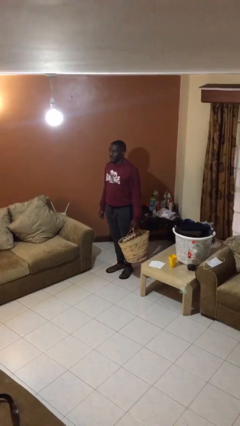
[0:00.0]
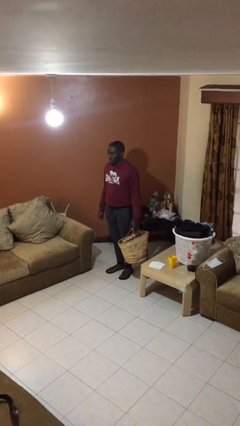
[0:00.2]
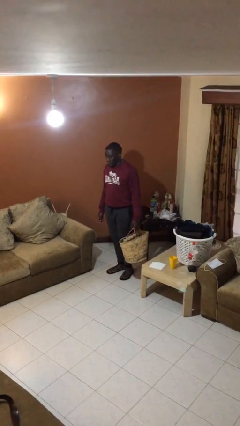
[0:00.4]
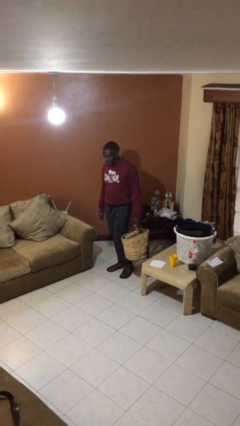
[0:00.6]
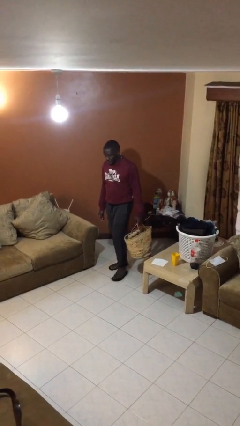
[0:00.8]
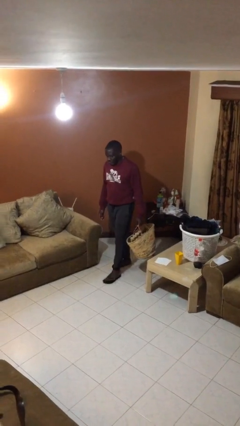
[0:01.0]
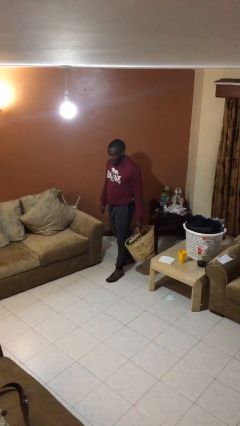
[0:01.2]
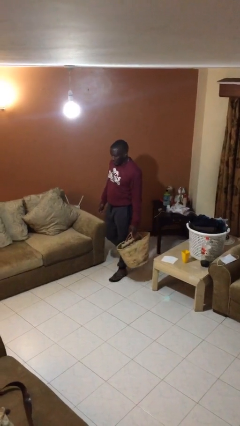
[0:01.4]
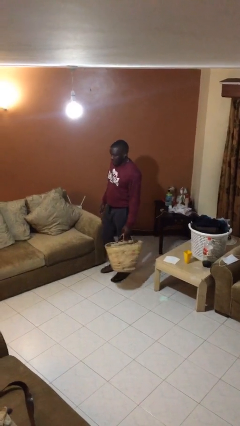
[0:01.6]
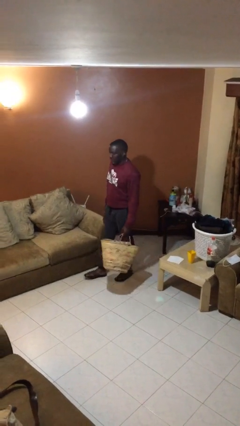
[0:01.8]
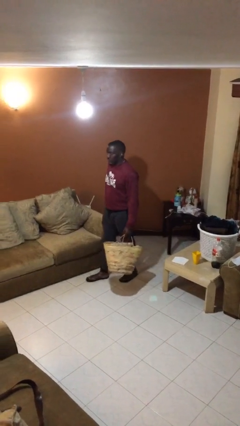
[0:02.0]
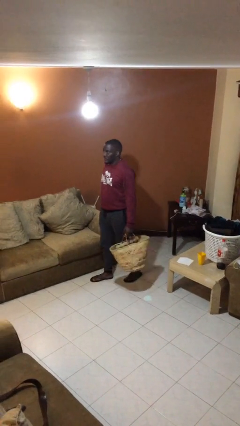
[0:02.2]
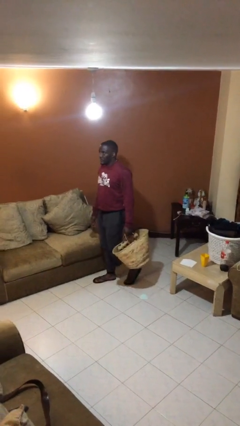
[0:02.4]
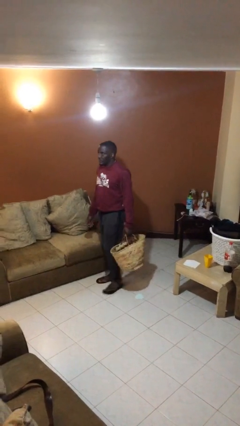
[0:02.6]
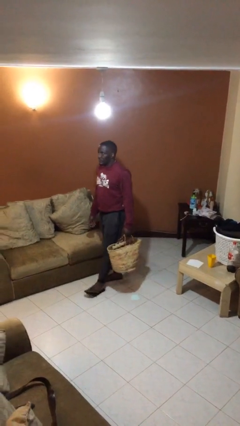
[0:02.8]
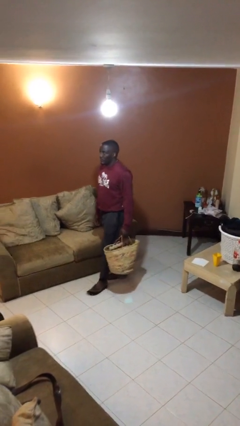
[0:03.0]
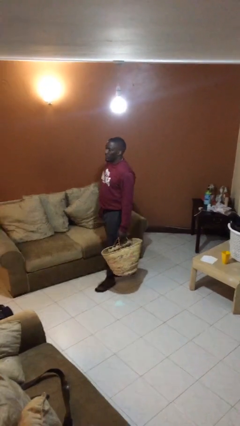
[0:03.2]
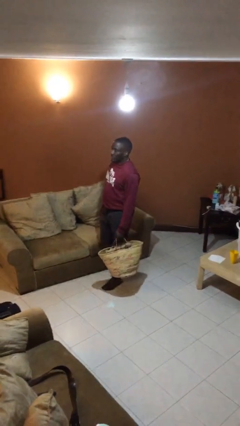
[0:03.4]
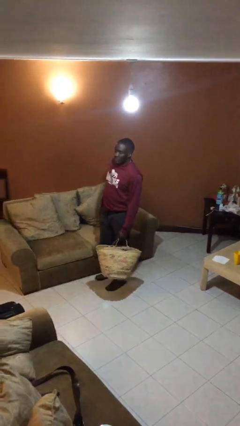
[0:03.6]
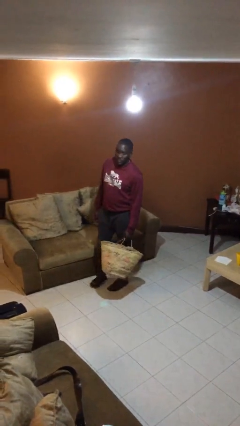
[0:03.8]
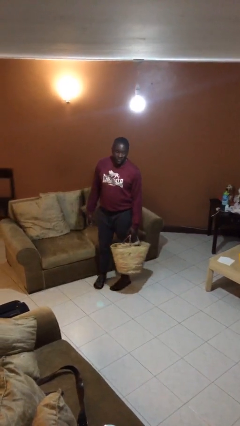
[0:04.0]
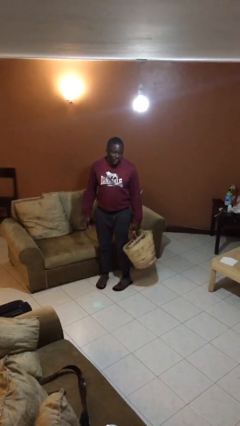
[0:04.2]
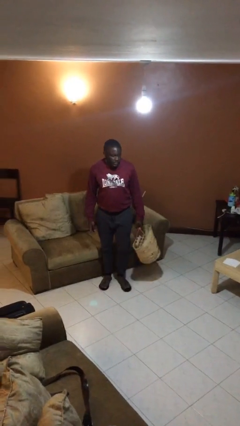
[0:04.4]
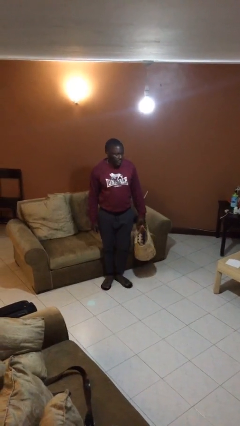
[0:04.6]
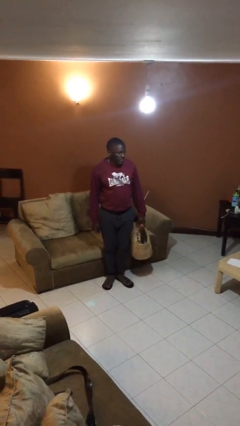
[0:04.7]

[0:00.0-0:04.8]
person carries groceries

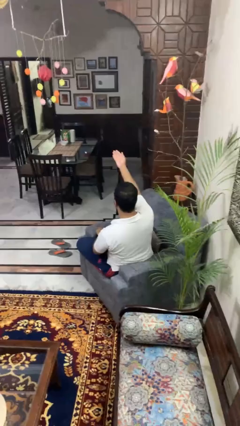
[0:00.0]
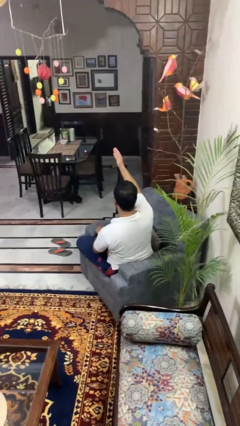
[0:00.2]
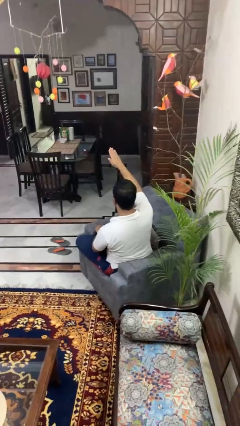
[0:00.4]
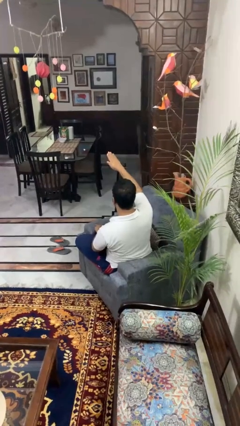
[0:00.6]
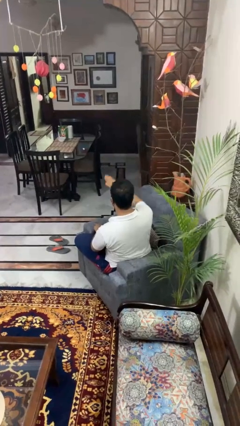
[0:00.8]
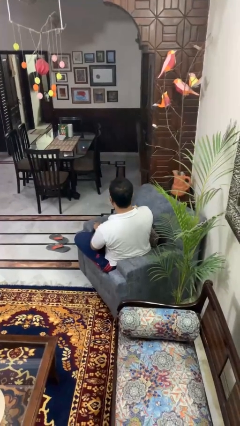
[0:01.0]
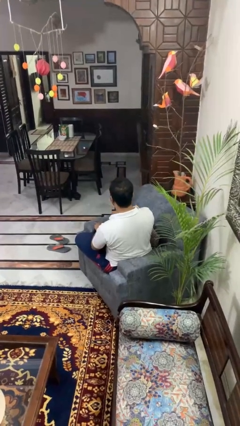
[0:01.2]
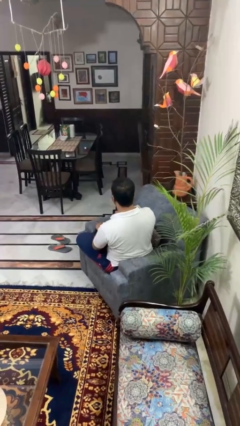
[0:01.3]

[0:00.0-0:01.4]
person gestures swipe down

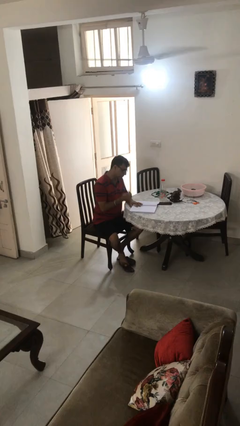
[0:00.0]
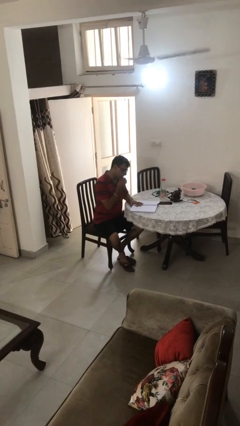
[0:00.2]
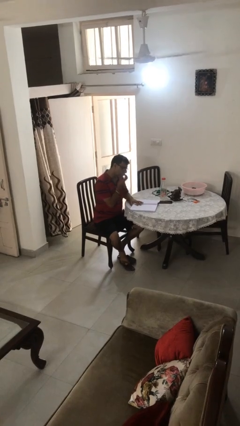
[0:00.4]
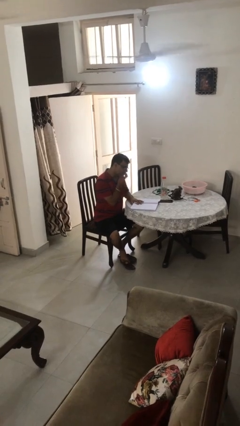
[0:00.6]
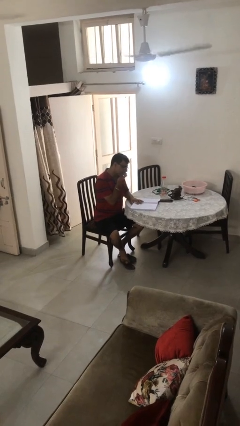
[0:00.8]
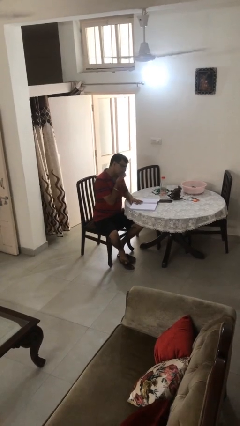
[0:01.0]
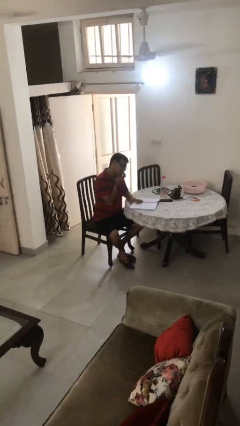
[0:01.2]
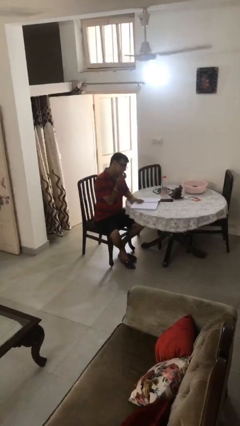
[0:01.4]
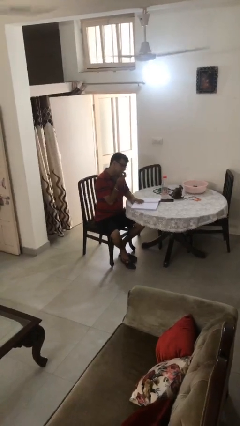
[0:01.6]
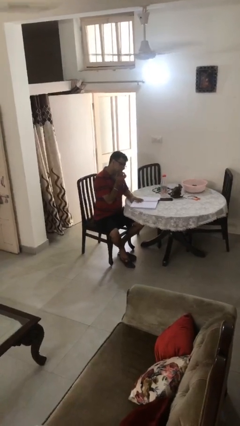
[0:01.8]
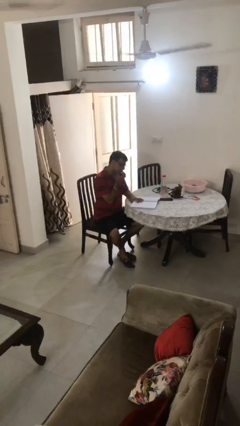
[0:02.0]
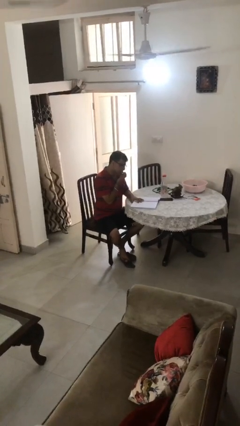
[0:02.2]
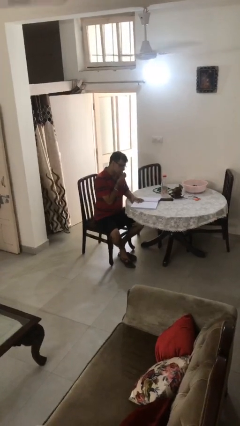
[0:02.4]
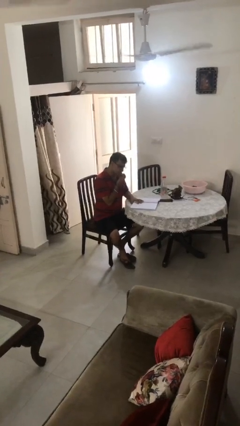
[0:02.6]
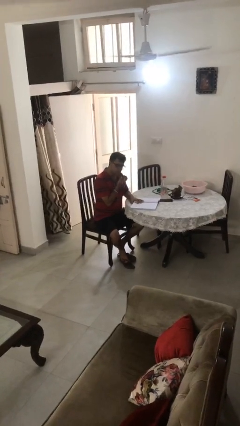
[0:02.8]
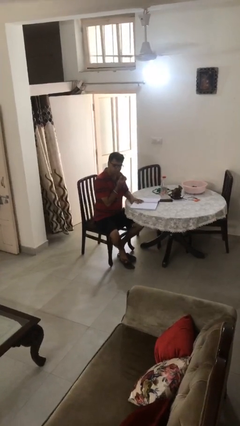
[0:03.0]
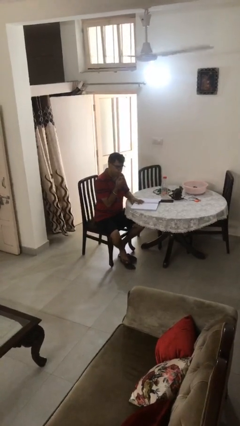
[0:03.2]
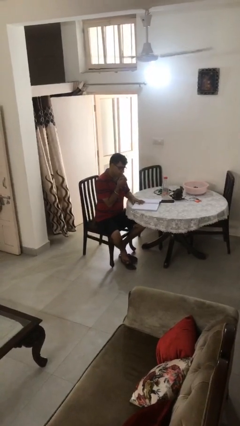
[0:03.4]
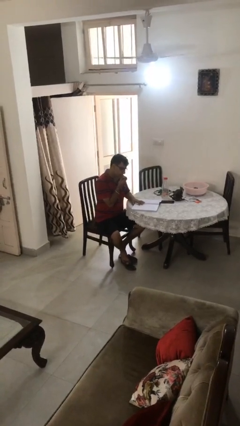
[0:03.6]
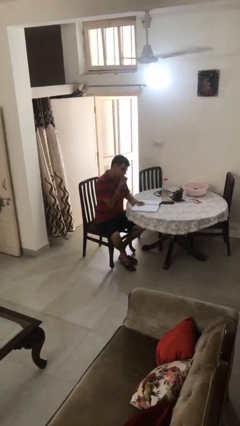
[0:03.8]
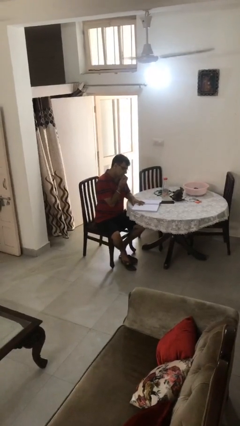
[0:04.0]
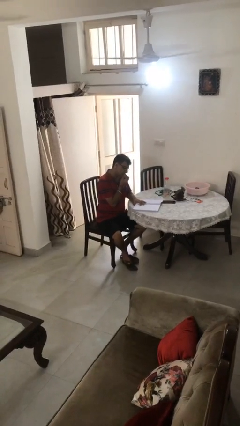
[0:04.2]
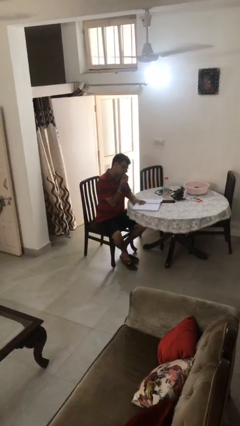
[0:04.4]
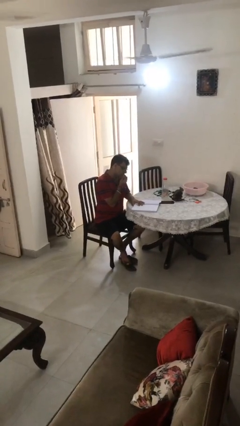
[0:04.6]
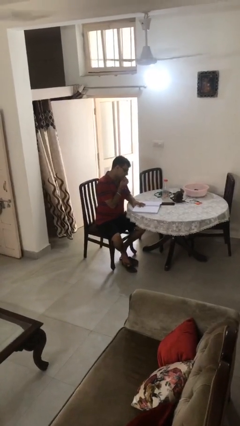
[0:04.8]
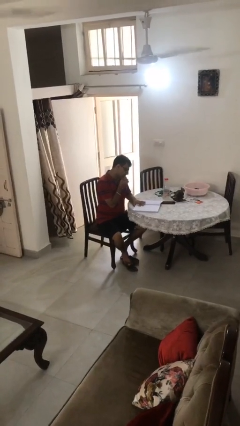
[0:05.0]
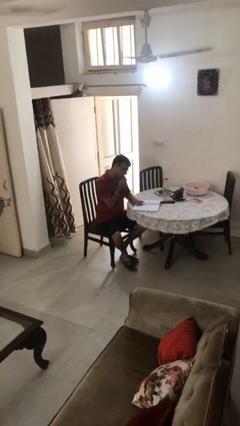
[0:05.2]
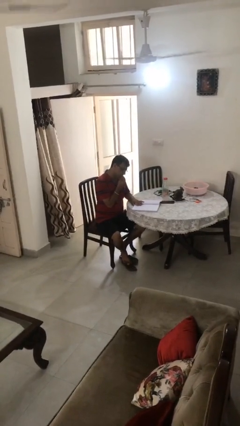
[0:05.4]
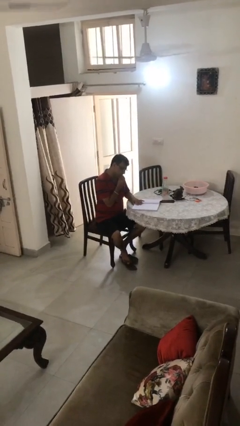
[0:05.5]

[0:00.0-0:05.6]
person reads document

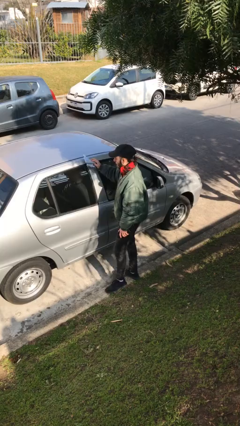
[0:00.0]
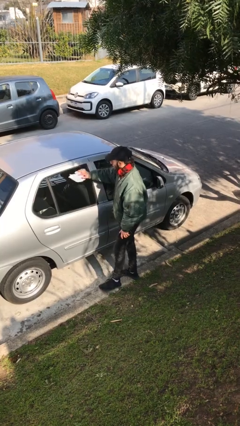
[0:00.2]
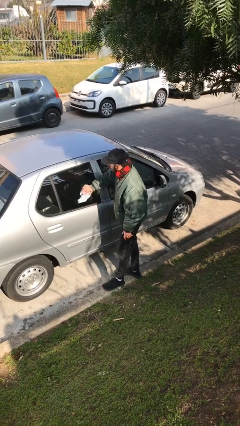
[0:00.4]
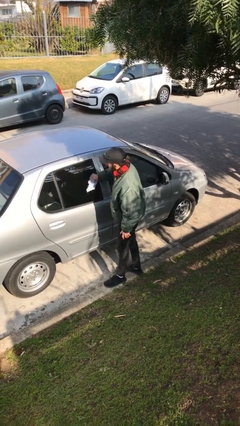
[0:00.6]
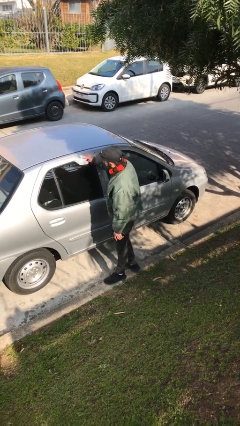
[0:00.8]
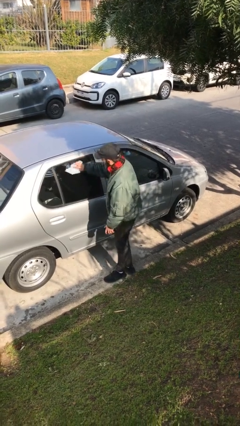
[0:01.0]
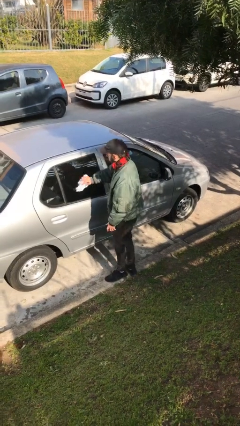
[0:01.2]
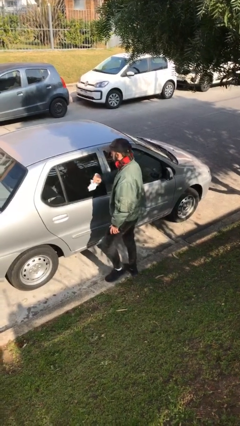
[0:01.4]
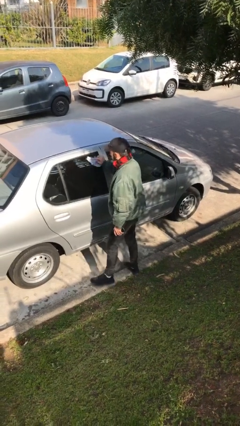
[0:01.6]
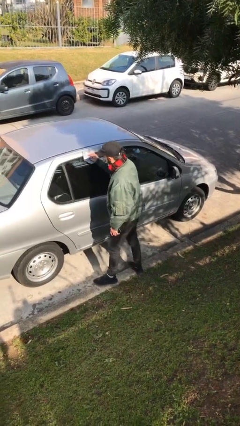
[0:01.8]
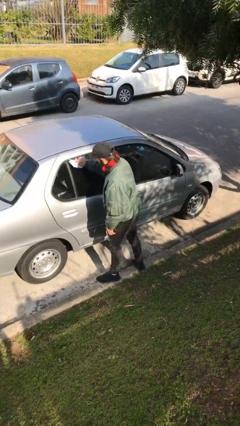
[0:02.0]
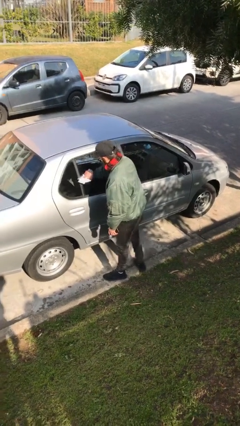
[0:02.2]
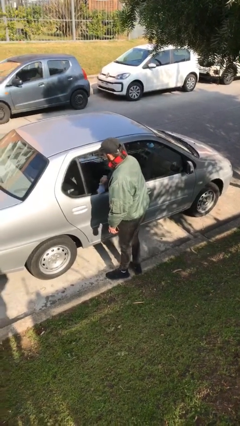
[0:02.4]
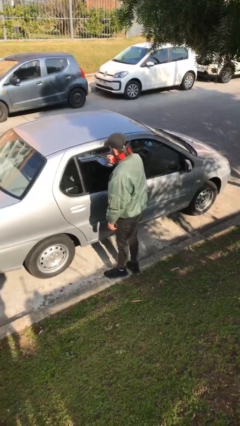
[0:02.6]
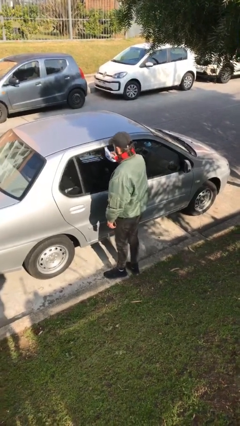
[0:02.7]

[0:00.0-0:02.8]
person polishes car with rag

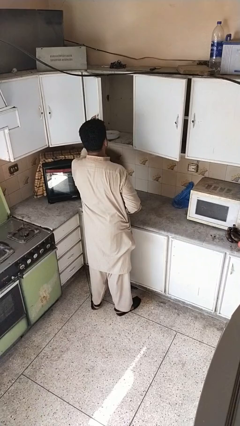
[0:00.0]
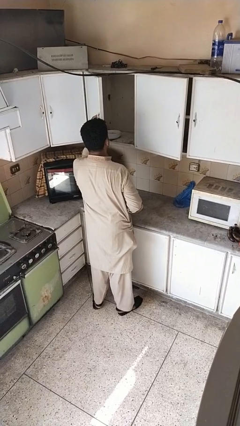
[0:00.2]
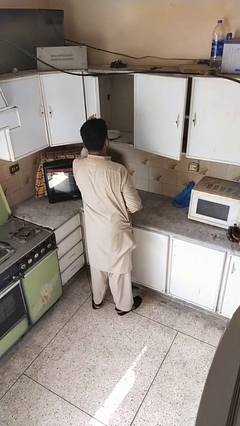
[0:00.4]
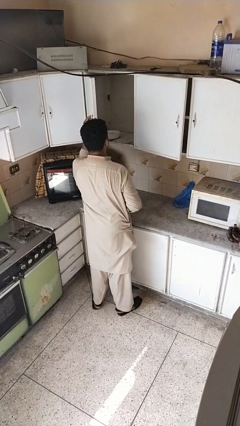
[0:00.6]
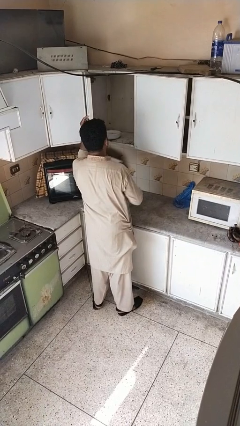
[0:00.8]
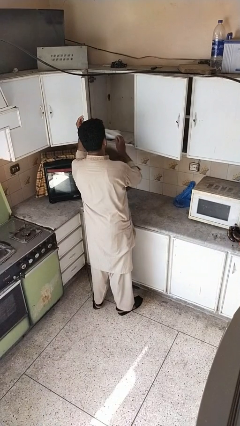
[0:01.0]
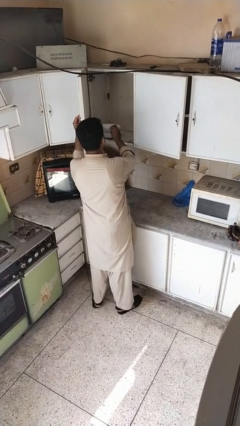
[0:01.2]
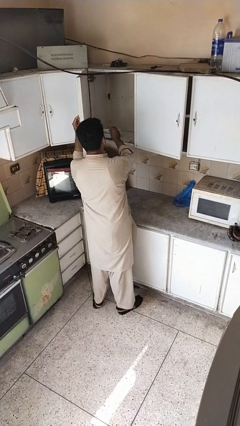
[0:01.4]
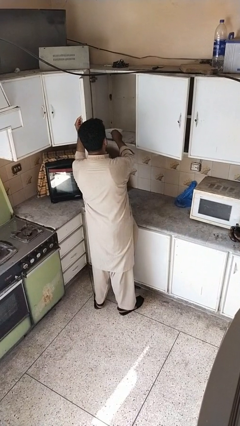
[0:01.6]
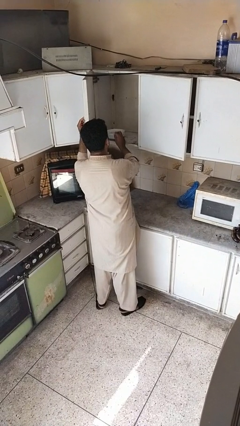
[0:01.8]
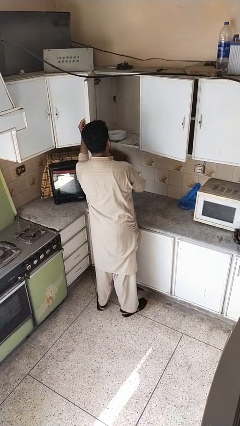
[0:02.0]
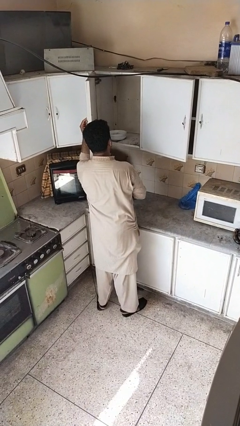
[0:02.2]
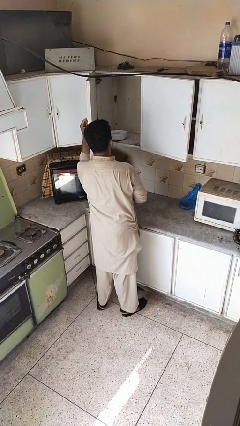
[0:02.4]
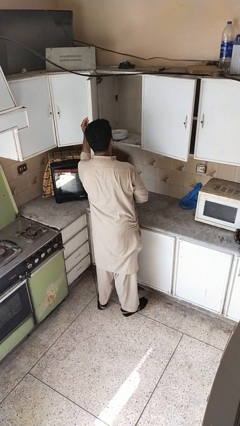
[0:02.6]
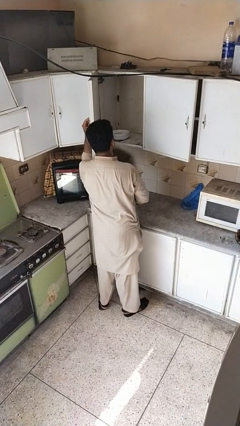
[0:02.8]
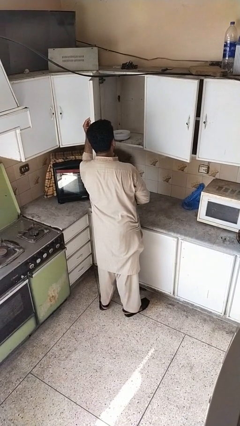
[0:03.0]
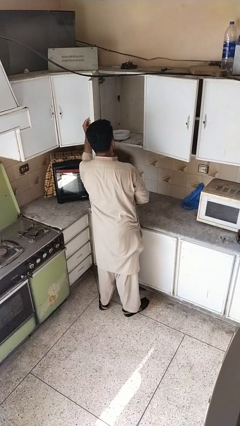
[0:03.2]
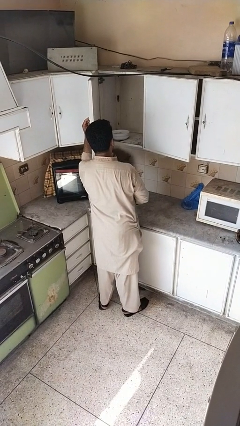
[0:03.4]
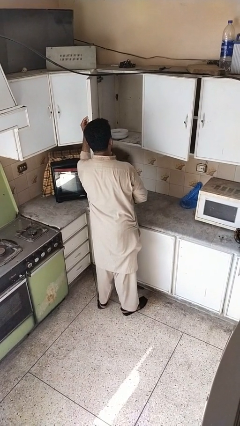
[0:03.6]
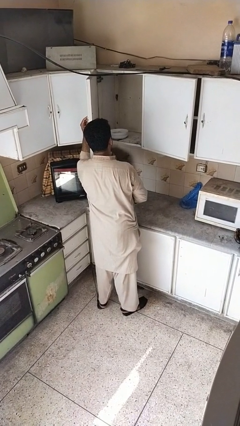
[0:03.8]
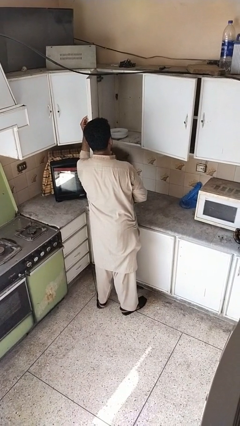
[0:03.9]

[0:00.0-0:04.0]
person puts object in cabinet
